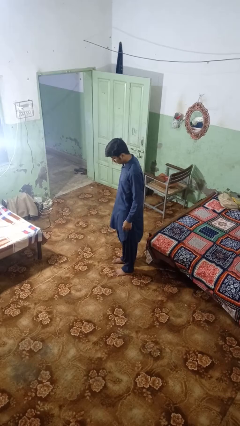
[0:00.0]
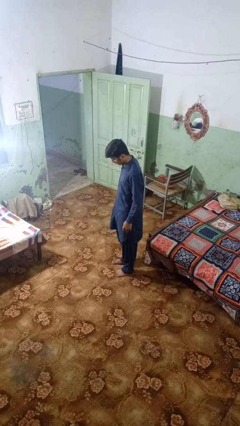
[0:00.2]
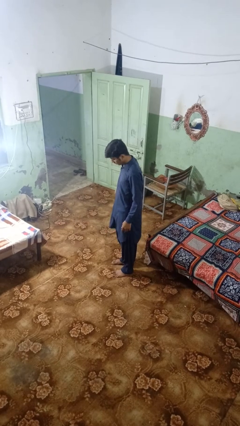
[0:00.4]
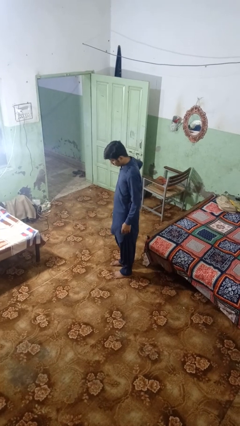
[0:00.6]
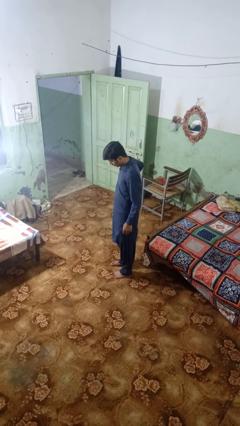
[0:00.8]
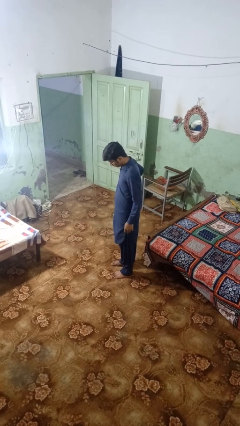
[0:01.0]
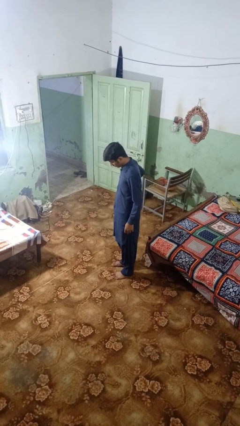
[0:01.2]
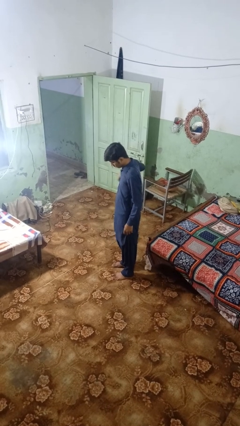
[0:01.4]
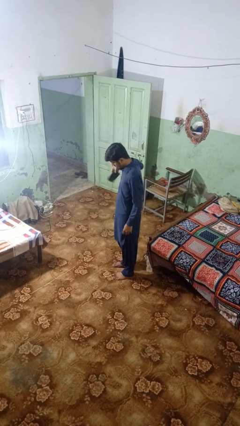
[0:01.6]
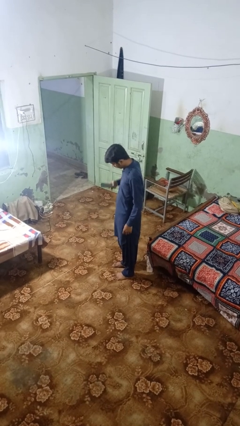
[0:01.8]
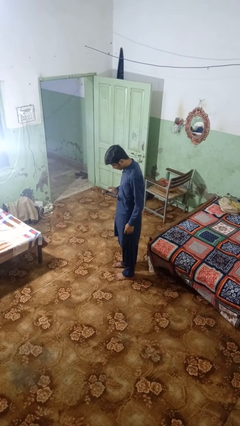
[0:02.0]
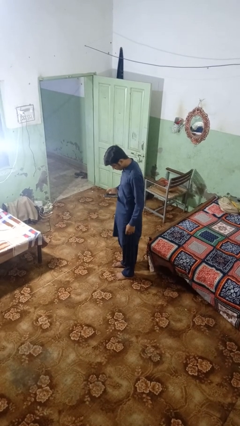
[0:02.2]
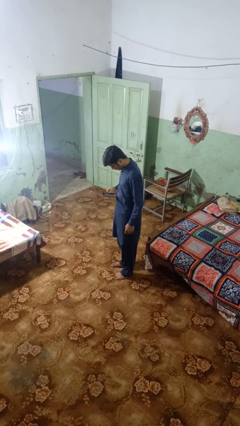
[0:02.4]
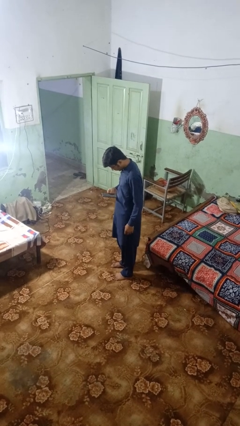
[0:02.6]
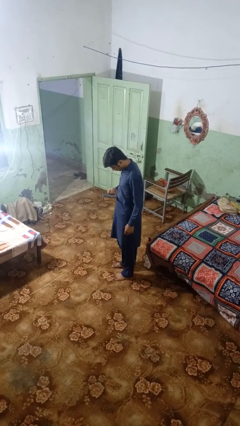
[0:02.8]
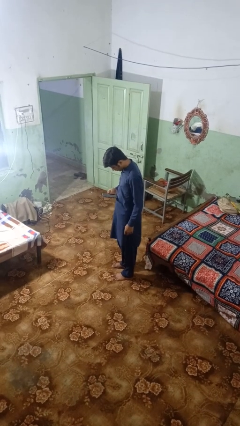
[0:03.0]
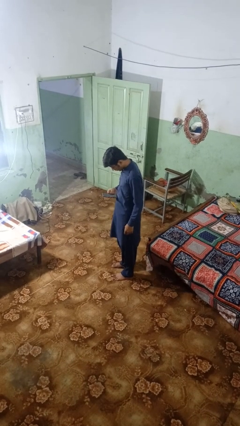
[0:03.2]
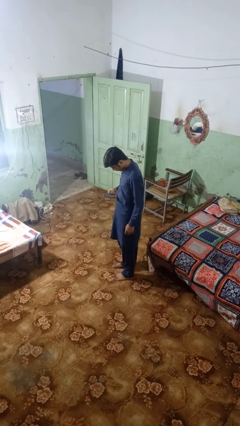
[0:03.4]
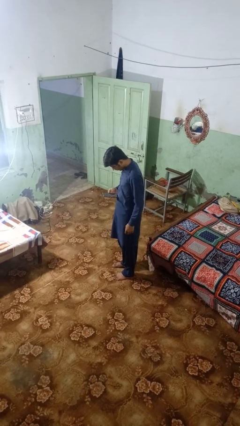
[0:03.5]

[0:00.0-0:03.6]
person takes phone from pocket

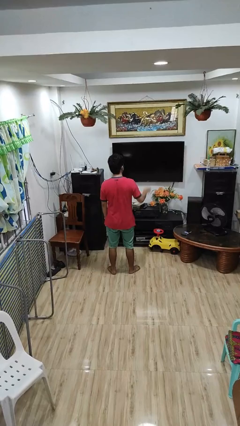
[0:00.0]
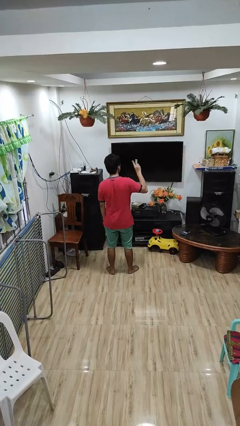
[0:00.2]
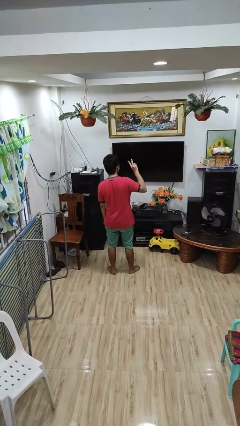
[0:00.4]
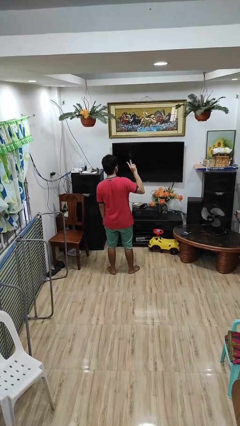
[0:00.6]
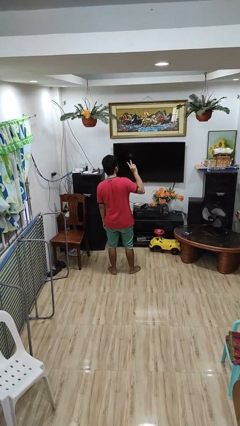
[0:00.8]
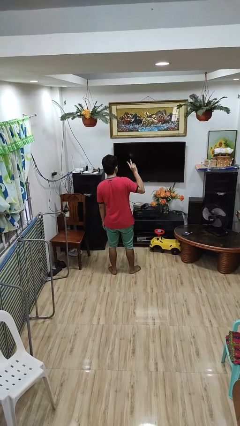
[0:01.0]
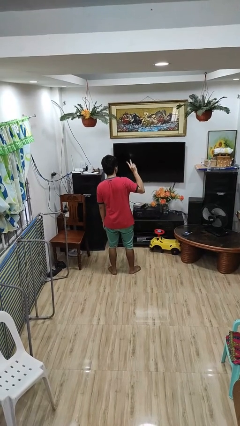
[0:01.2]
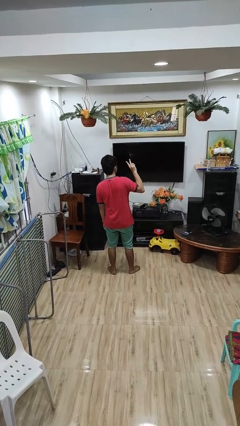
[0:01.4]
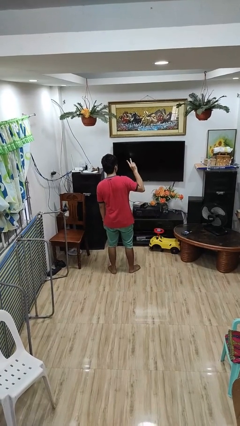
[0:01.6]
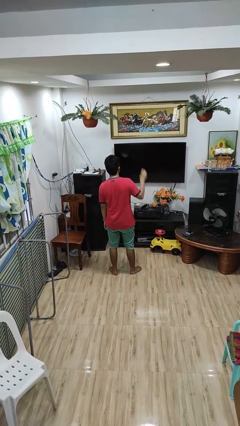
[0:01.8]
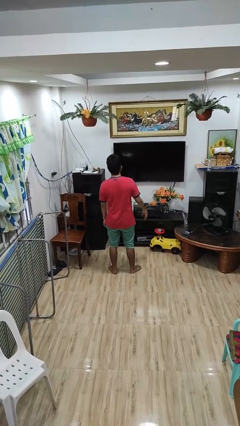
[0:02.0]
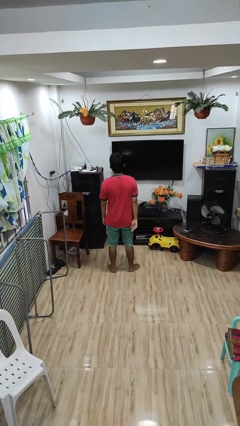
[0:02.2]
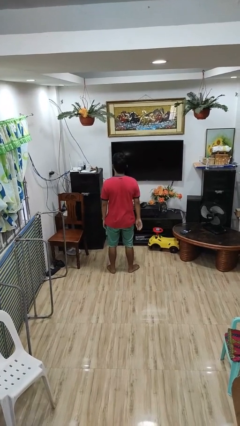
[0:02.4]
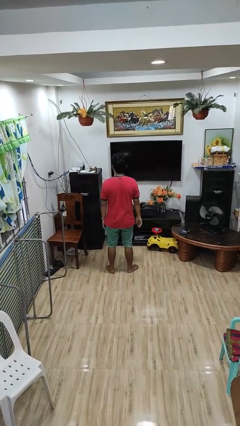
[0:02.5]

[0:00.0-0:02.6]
person gestures peace

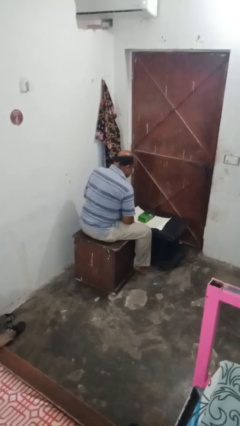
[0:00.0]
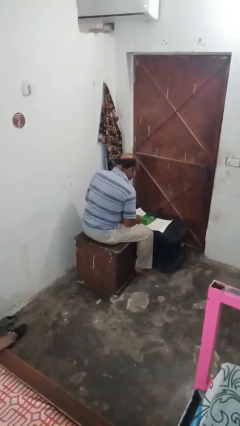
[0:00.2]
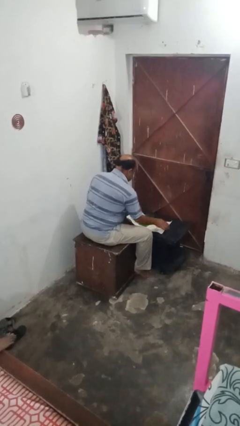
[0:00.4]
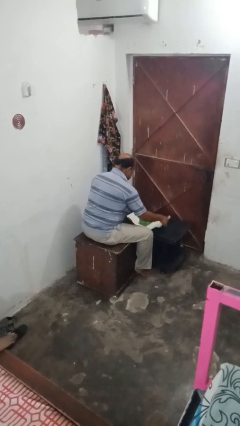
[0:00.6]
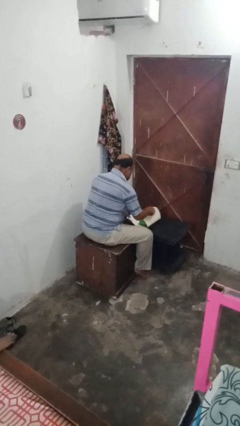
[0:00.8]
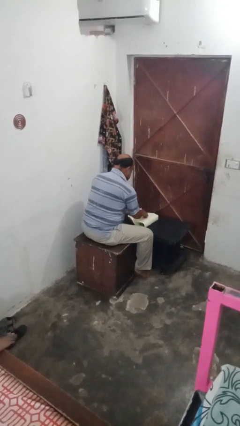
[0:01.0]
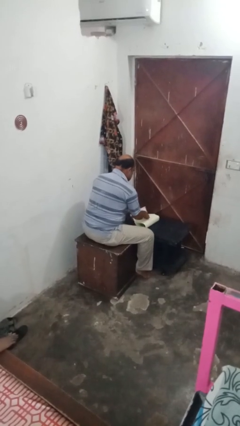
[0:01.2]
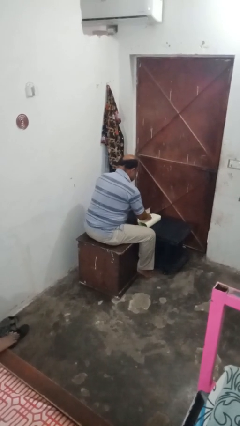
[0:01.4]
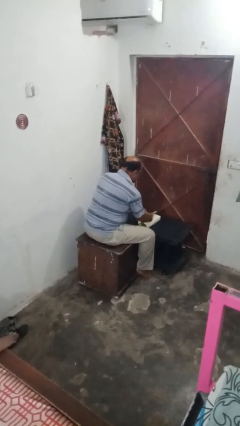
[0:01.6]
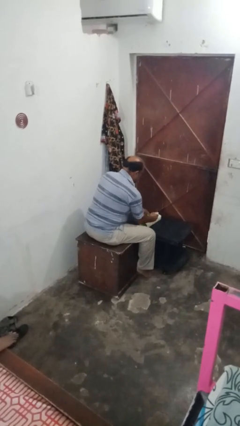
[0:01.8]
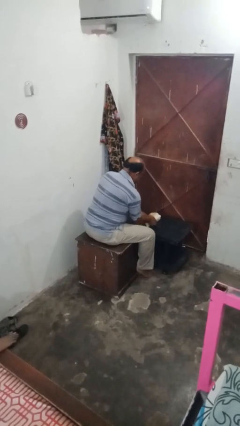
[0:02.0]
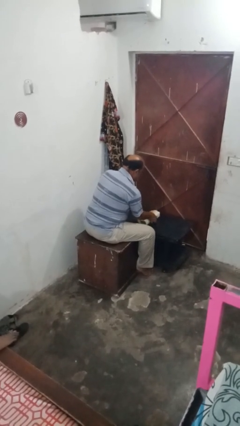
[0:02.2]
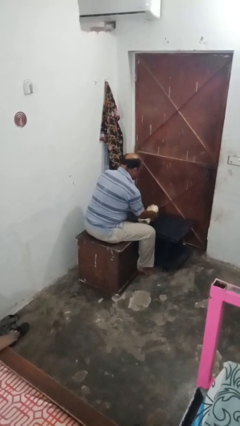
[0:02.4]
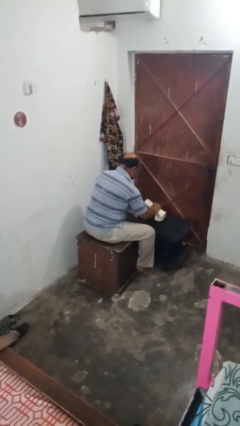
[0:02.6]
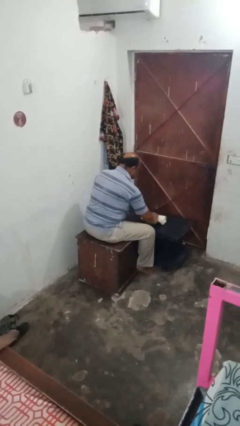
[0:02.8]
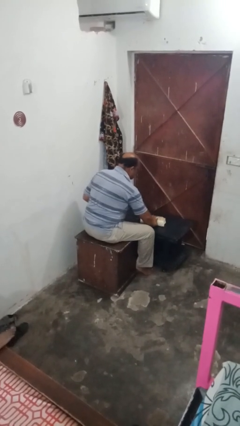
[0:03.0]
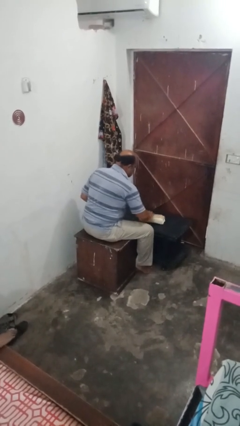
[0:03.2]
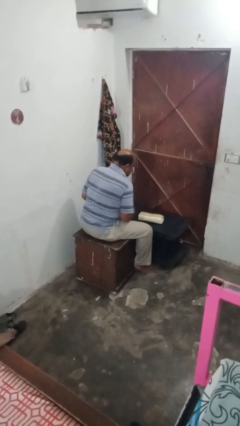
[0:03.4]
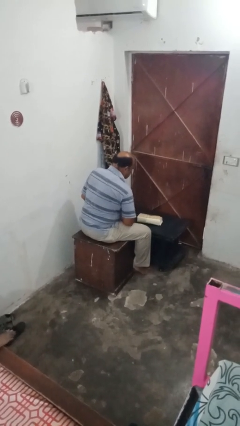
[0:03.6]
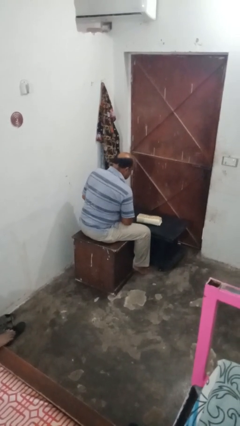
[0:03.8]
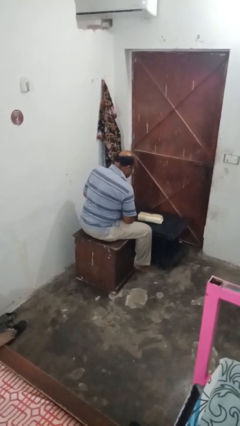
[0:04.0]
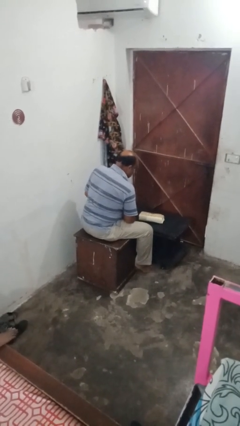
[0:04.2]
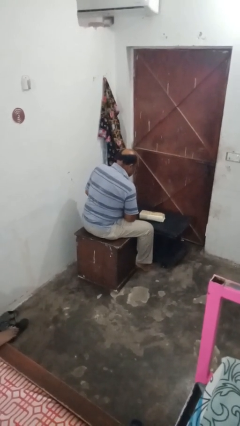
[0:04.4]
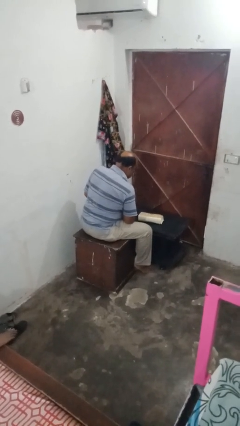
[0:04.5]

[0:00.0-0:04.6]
person wraps box

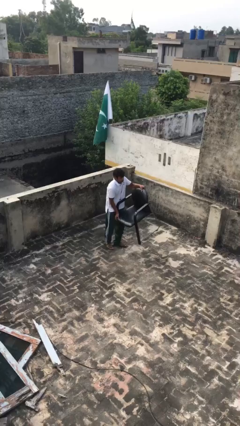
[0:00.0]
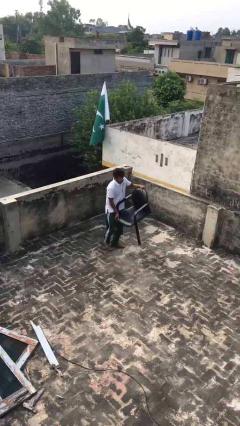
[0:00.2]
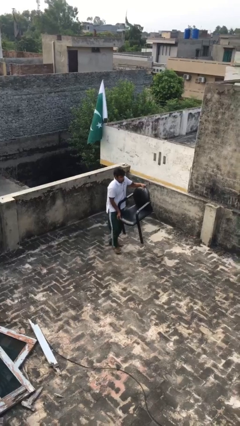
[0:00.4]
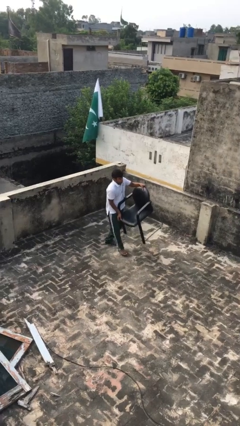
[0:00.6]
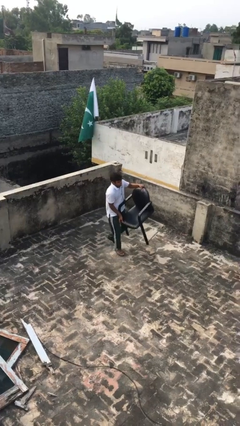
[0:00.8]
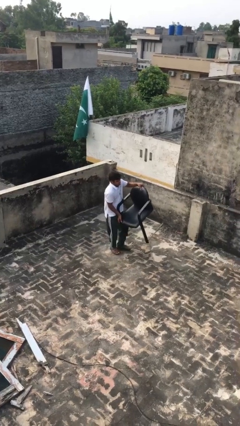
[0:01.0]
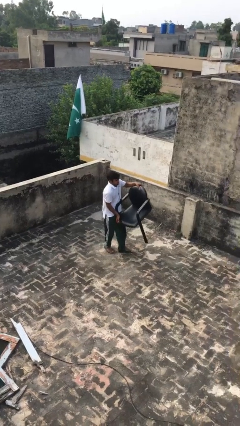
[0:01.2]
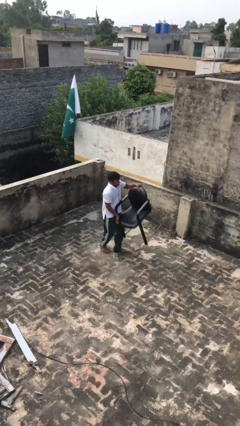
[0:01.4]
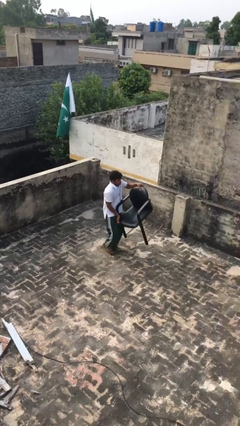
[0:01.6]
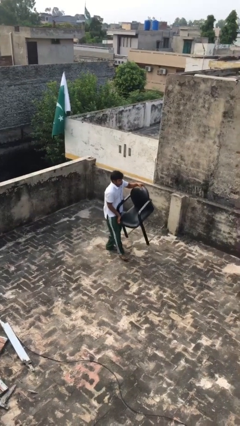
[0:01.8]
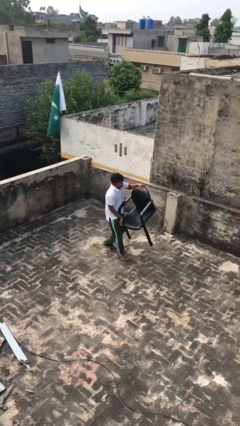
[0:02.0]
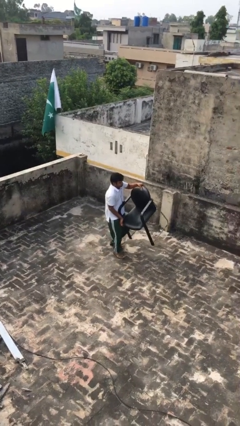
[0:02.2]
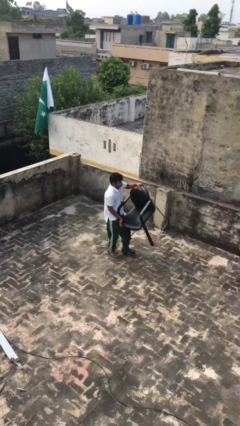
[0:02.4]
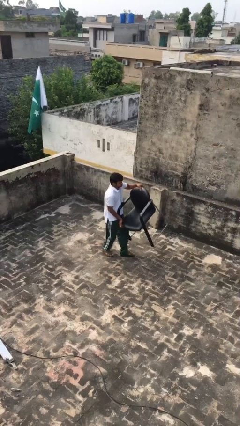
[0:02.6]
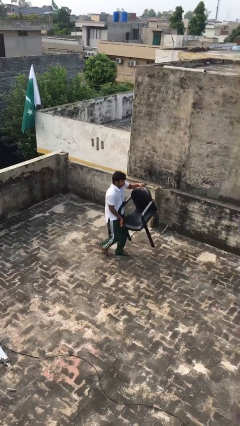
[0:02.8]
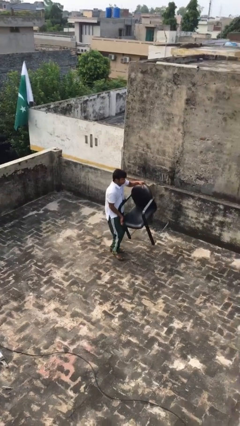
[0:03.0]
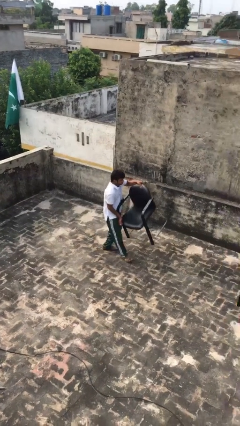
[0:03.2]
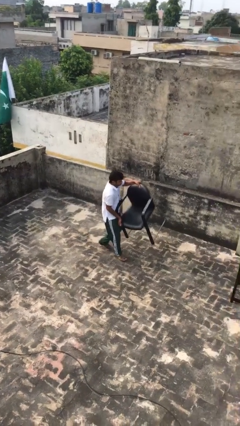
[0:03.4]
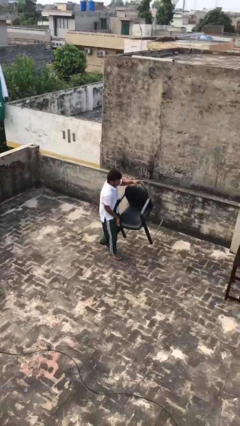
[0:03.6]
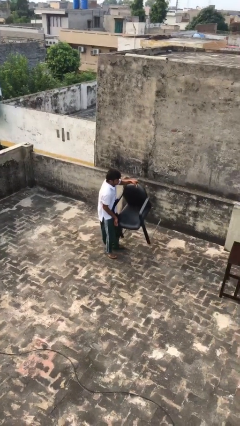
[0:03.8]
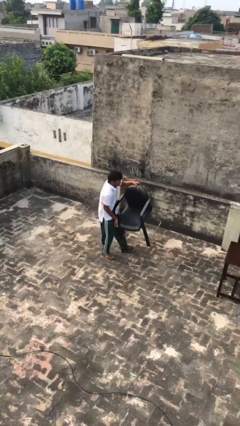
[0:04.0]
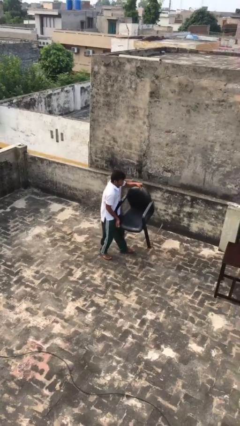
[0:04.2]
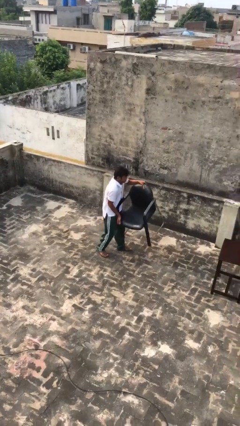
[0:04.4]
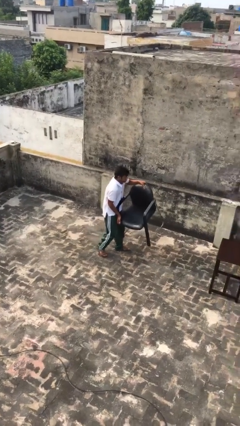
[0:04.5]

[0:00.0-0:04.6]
person carries heavy object

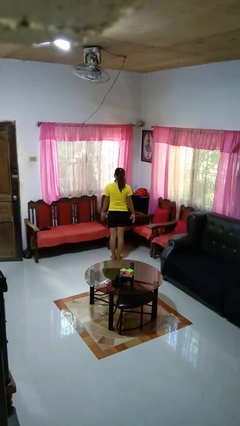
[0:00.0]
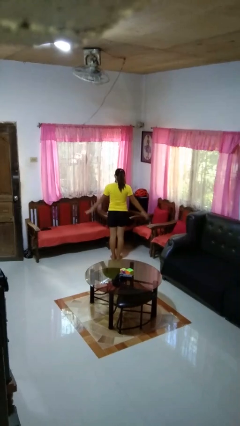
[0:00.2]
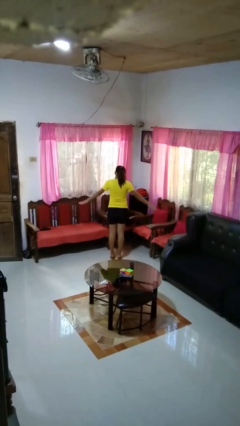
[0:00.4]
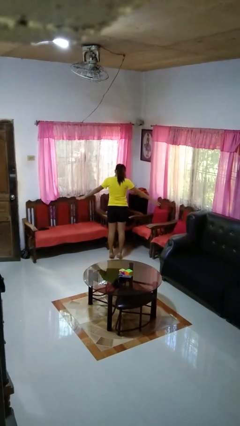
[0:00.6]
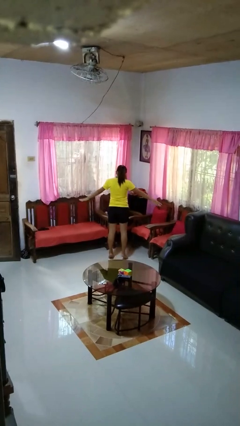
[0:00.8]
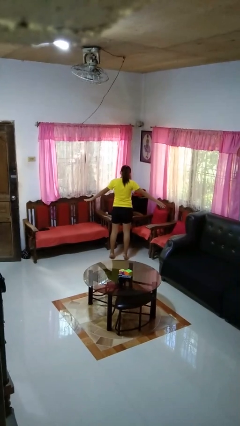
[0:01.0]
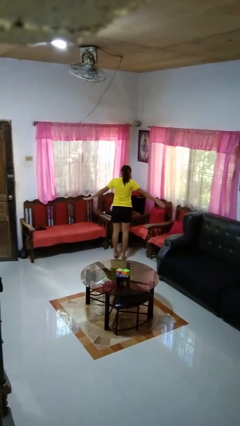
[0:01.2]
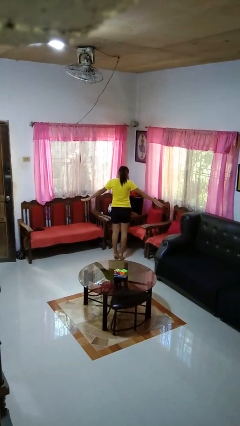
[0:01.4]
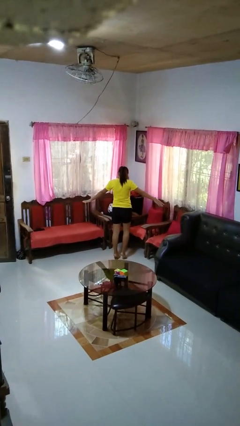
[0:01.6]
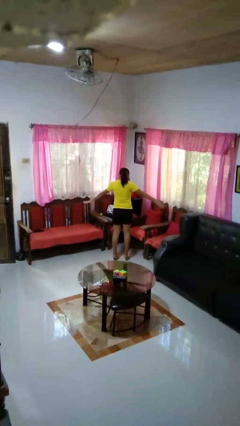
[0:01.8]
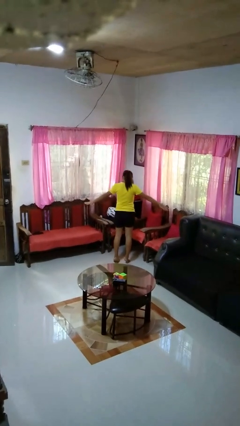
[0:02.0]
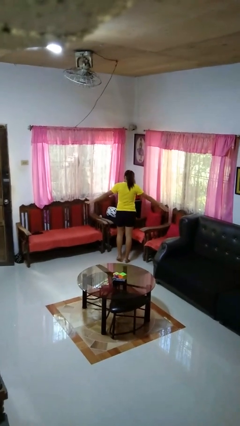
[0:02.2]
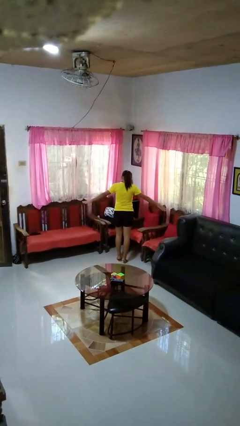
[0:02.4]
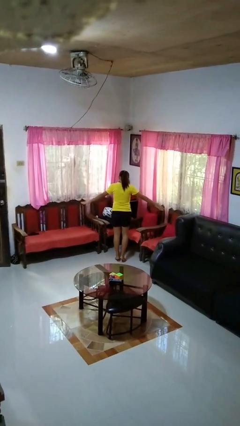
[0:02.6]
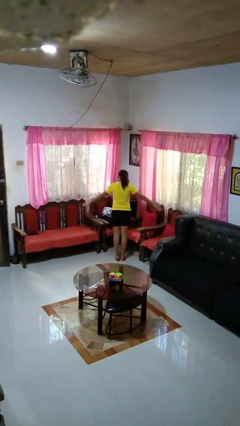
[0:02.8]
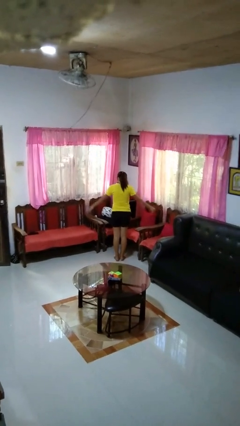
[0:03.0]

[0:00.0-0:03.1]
person walks tiptoe
